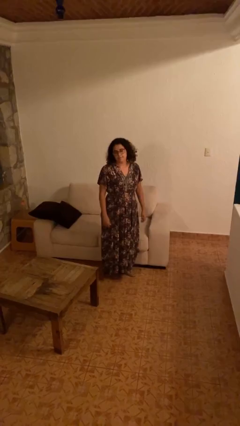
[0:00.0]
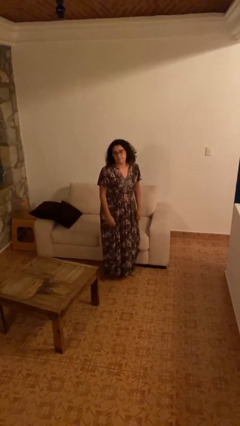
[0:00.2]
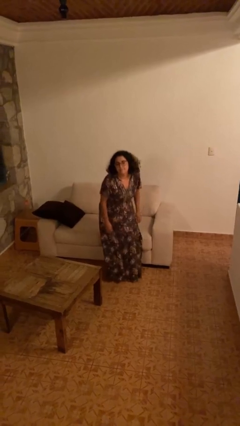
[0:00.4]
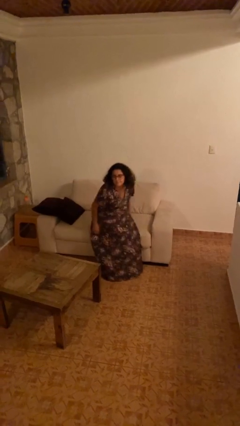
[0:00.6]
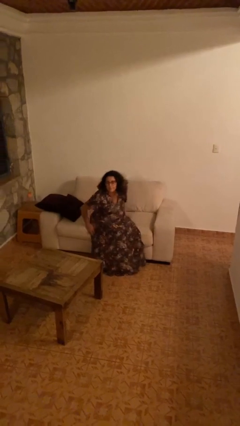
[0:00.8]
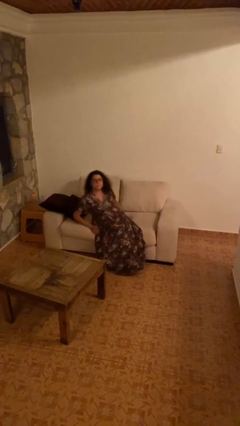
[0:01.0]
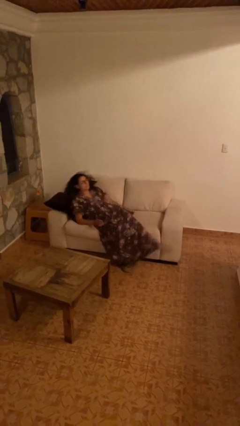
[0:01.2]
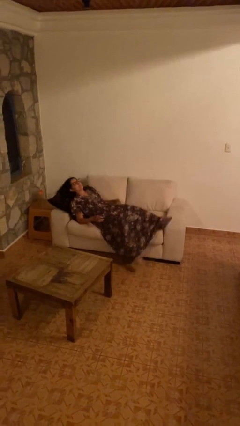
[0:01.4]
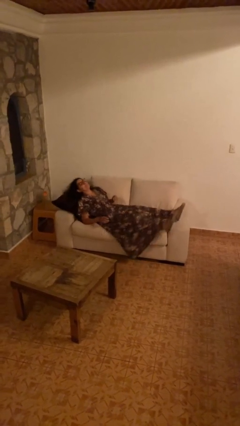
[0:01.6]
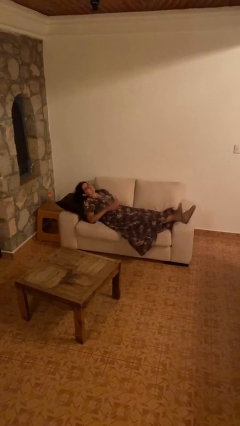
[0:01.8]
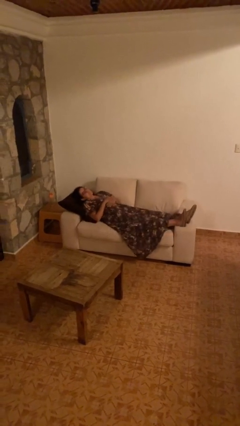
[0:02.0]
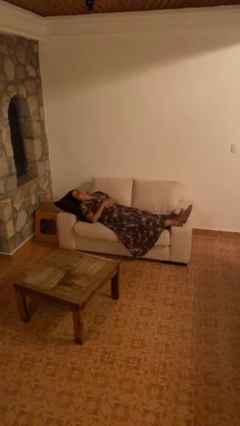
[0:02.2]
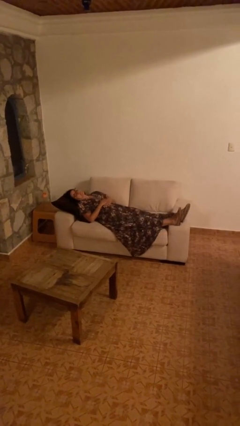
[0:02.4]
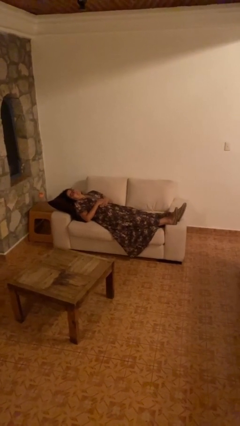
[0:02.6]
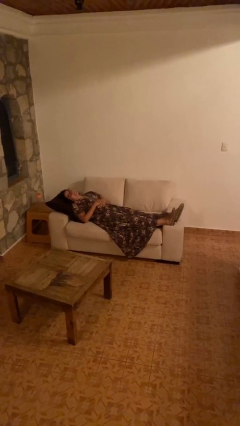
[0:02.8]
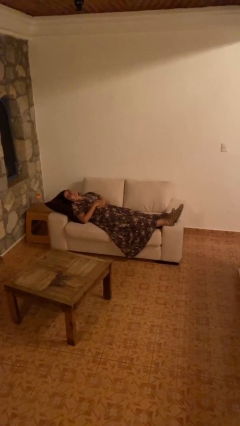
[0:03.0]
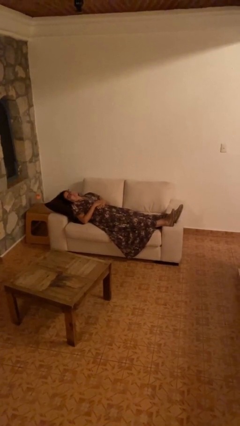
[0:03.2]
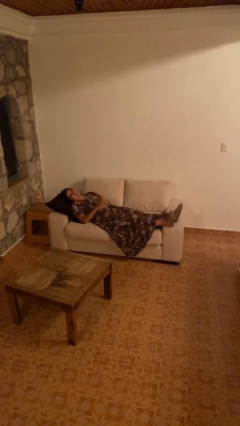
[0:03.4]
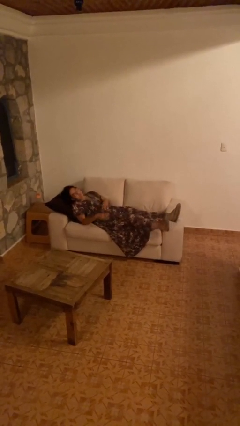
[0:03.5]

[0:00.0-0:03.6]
person lies down on couch

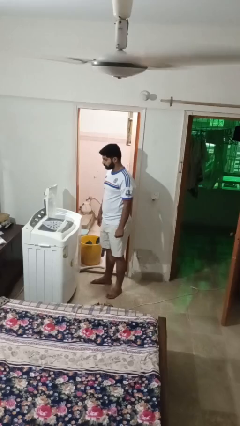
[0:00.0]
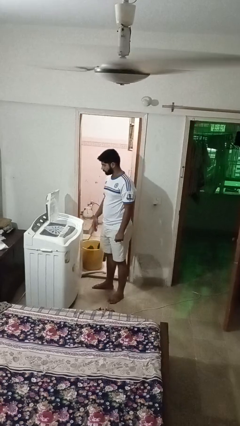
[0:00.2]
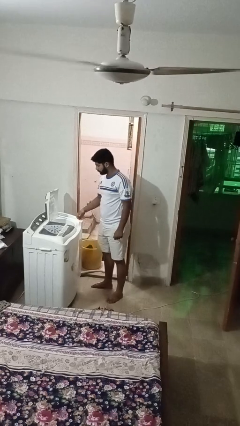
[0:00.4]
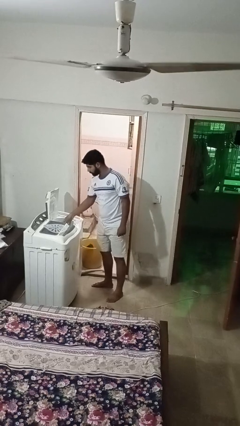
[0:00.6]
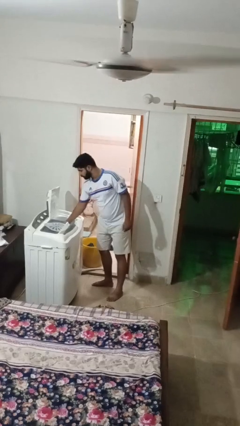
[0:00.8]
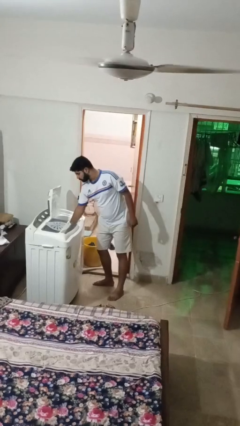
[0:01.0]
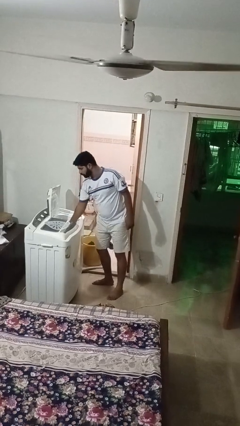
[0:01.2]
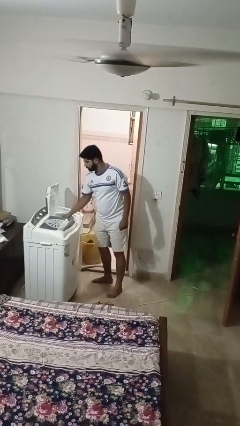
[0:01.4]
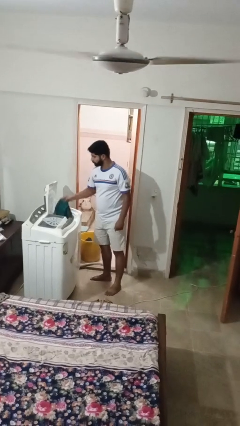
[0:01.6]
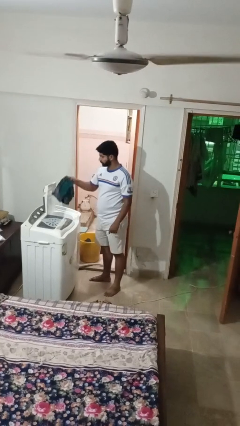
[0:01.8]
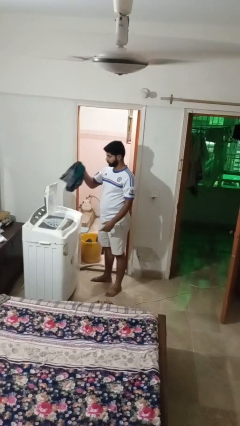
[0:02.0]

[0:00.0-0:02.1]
person unloads dryer

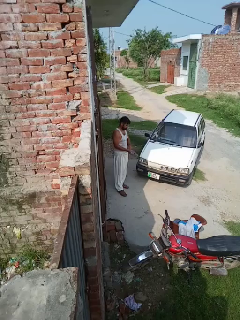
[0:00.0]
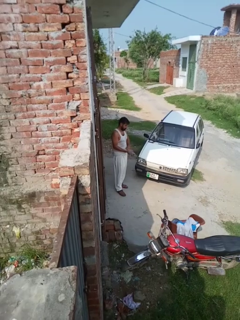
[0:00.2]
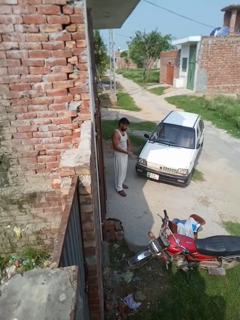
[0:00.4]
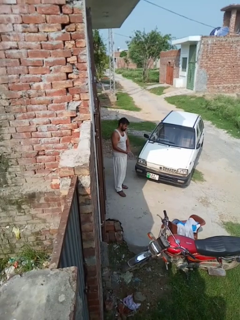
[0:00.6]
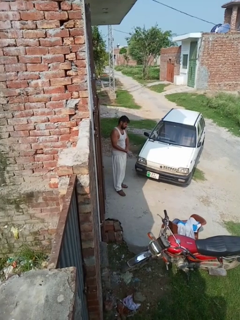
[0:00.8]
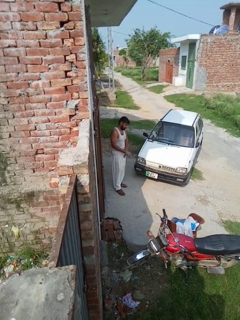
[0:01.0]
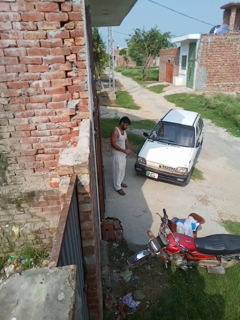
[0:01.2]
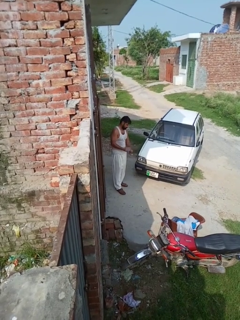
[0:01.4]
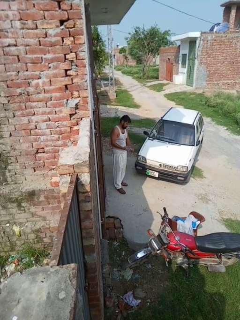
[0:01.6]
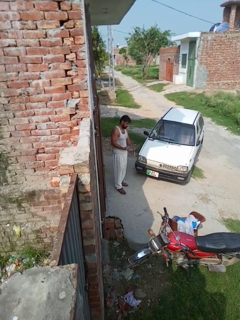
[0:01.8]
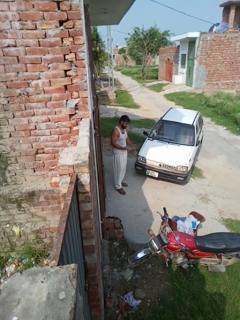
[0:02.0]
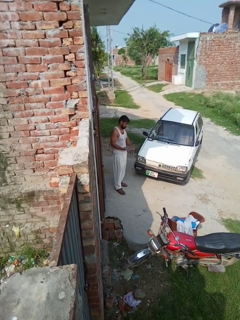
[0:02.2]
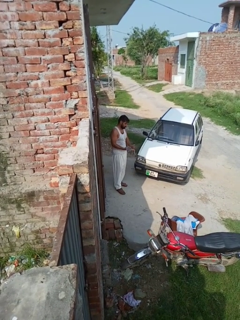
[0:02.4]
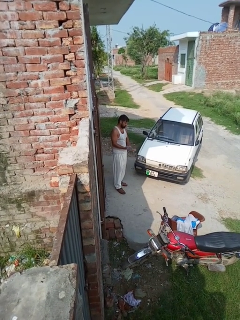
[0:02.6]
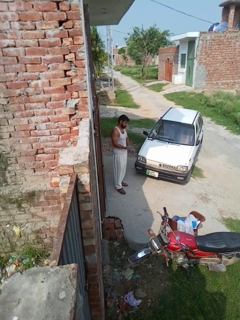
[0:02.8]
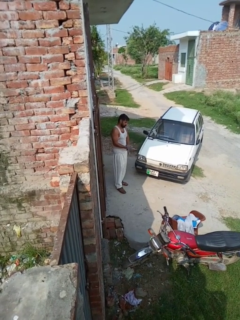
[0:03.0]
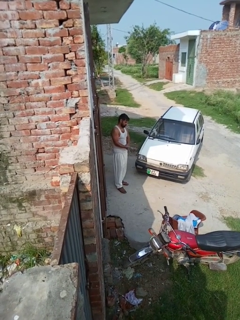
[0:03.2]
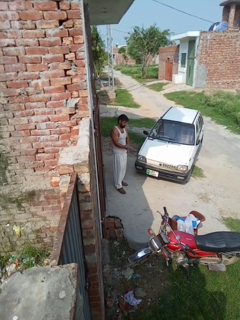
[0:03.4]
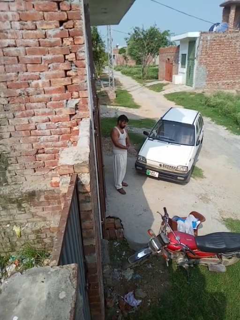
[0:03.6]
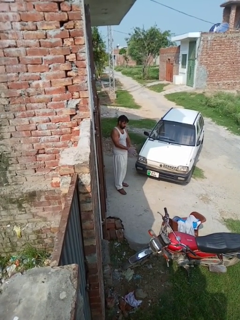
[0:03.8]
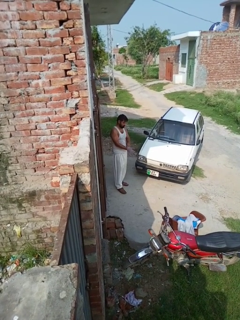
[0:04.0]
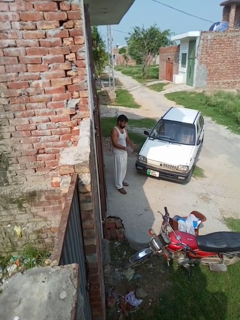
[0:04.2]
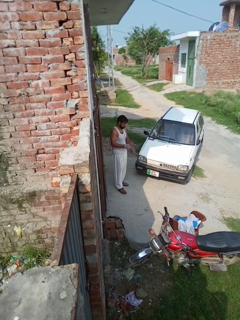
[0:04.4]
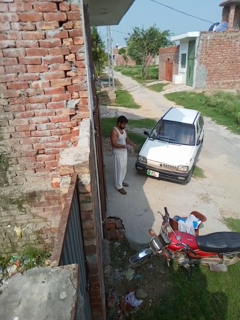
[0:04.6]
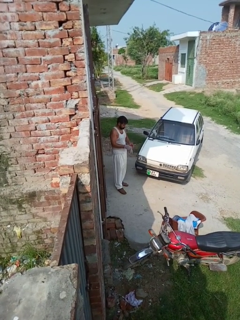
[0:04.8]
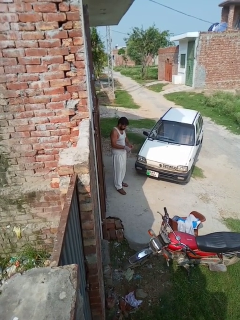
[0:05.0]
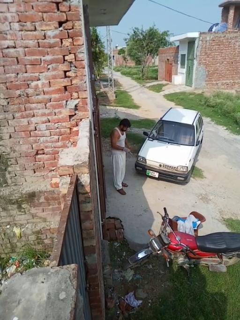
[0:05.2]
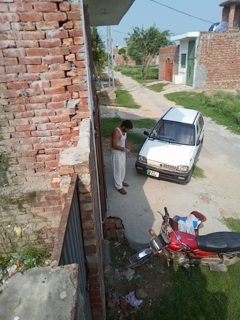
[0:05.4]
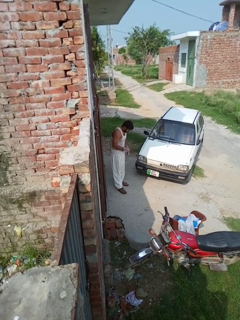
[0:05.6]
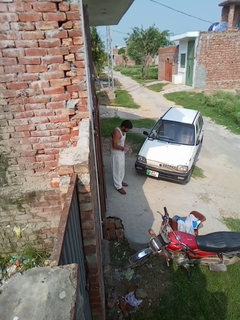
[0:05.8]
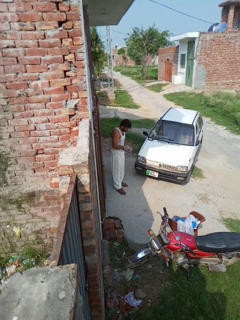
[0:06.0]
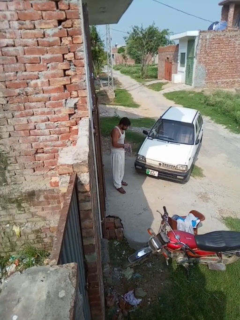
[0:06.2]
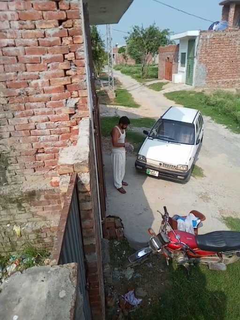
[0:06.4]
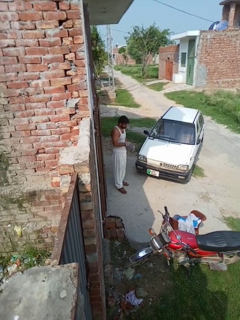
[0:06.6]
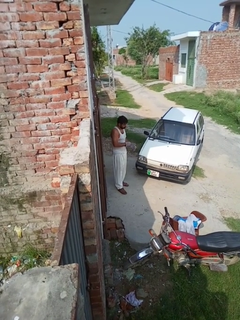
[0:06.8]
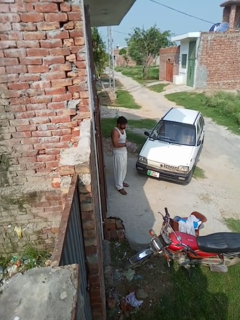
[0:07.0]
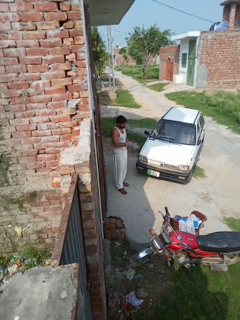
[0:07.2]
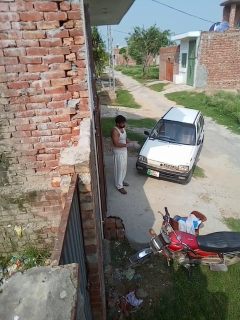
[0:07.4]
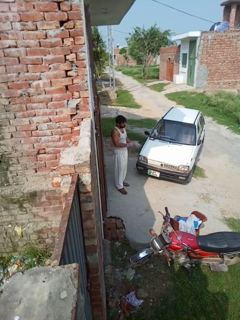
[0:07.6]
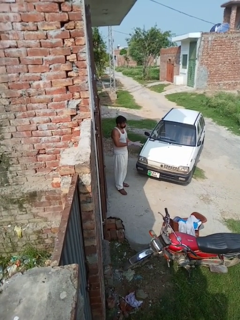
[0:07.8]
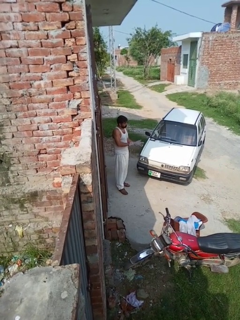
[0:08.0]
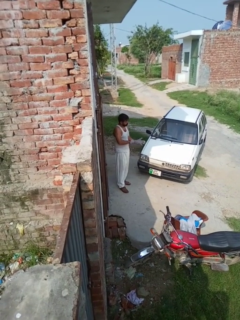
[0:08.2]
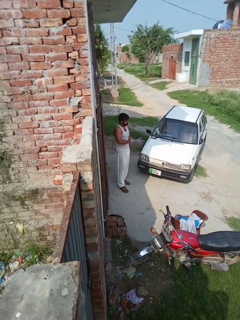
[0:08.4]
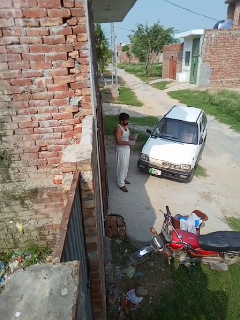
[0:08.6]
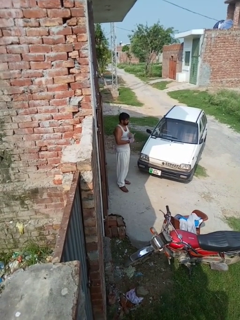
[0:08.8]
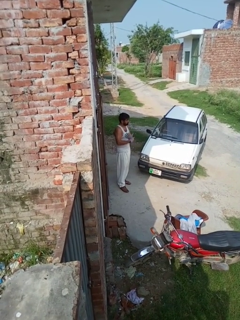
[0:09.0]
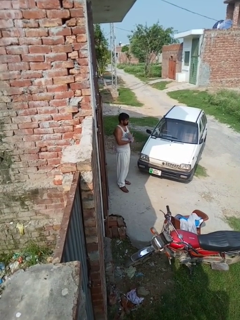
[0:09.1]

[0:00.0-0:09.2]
person puts on gloves

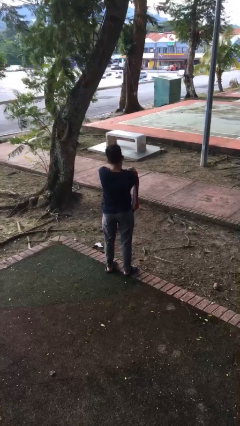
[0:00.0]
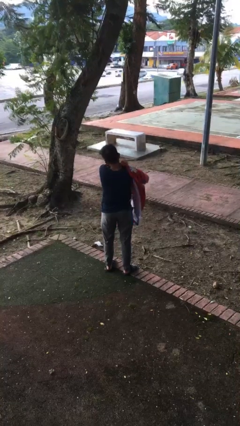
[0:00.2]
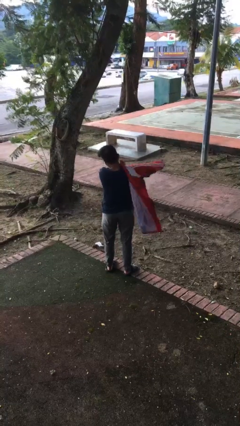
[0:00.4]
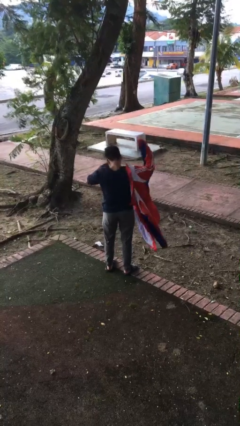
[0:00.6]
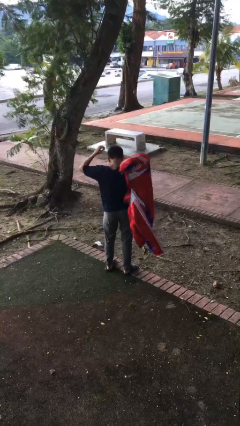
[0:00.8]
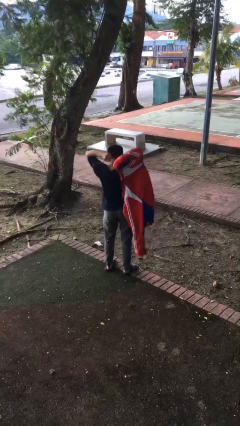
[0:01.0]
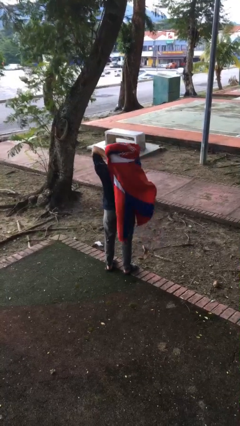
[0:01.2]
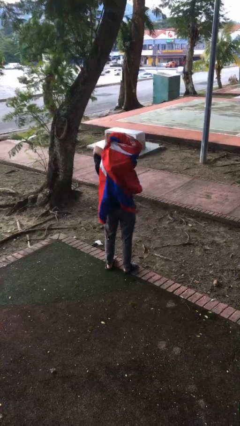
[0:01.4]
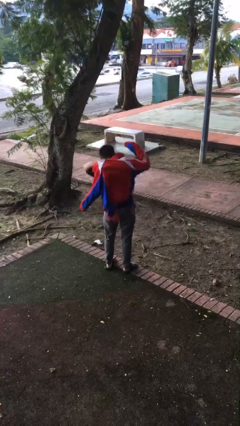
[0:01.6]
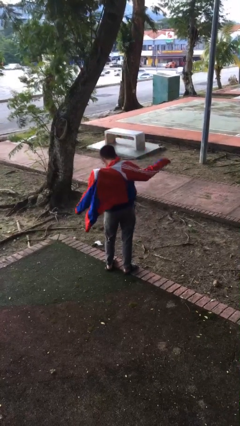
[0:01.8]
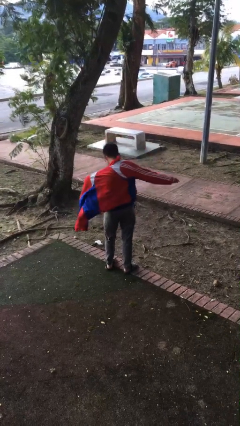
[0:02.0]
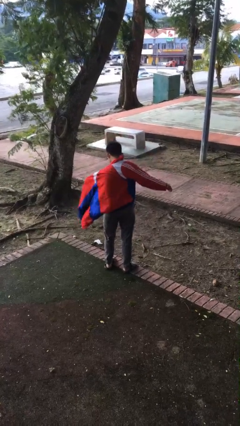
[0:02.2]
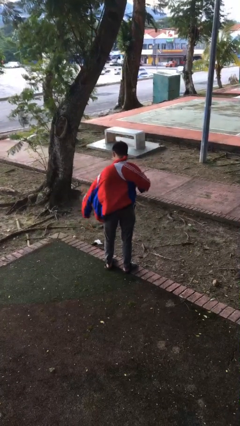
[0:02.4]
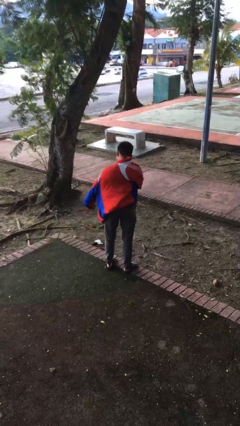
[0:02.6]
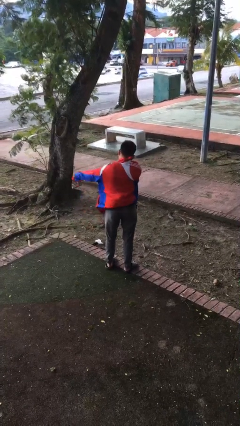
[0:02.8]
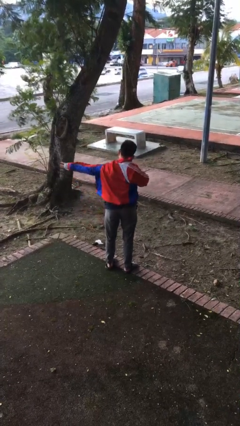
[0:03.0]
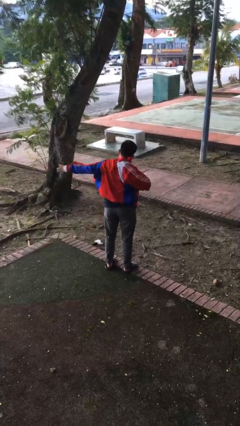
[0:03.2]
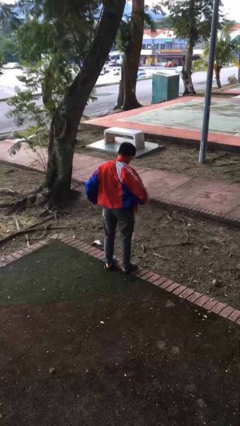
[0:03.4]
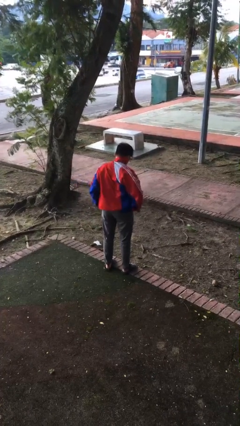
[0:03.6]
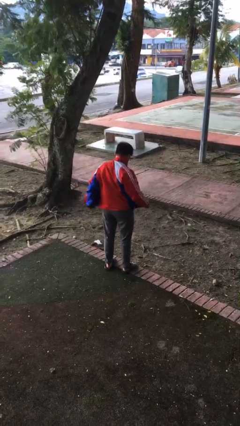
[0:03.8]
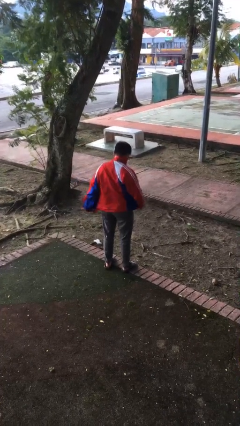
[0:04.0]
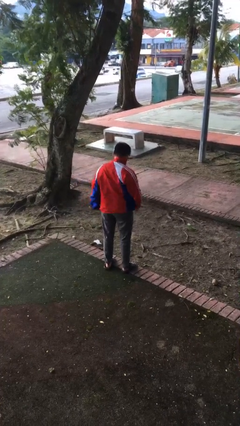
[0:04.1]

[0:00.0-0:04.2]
person puts on jacket

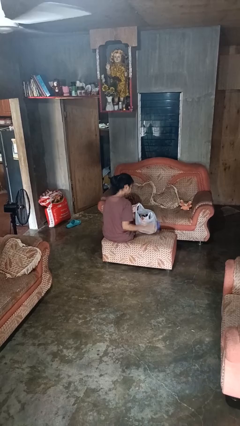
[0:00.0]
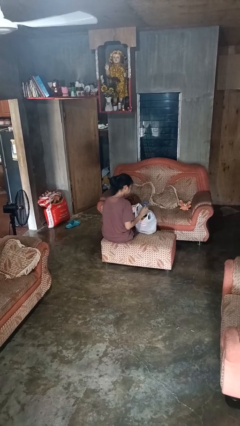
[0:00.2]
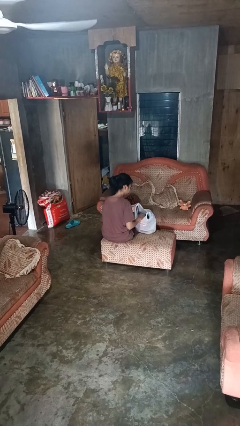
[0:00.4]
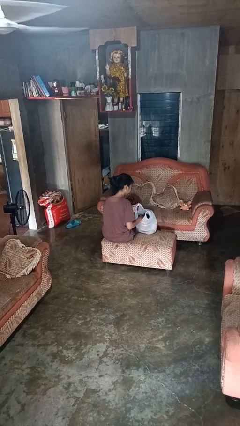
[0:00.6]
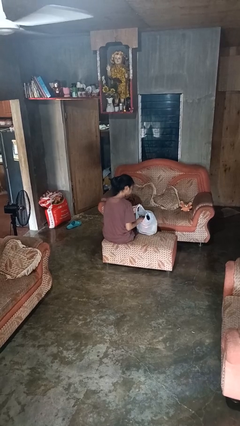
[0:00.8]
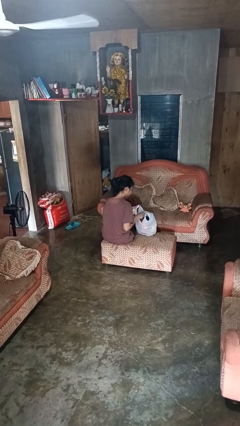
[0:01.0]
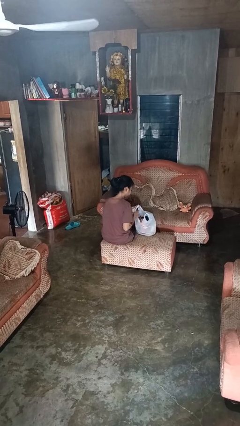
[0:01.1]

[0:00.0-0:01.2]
person puts object into bag
